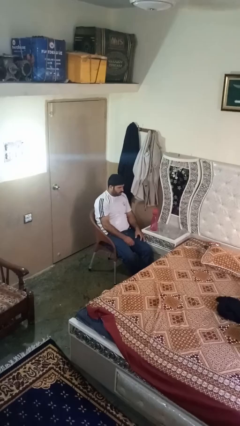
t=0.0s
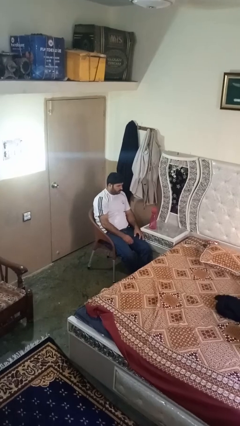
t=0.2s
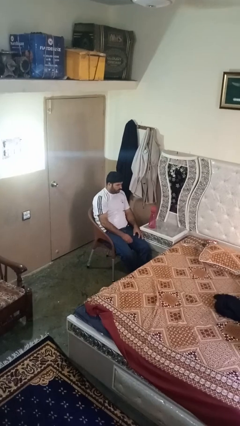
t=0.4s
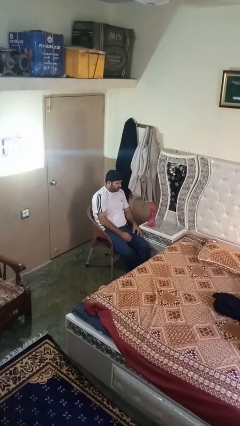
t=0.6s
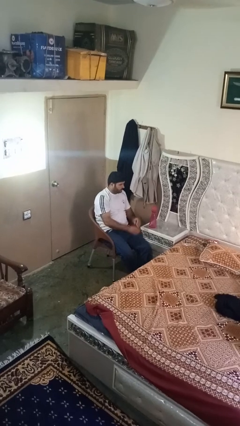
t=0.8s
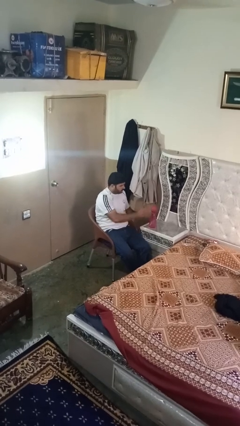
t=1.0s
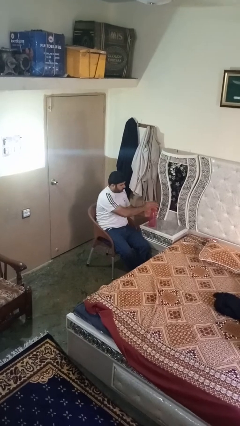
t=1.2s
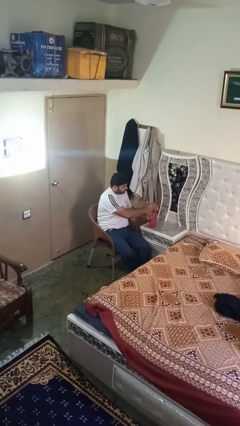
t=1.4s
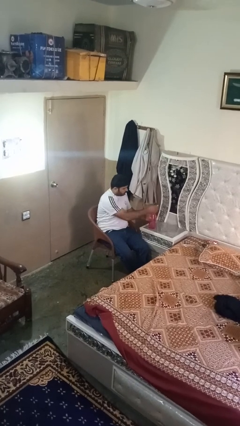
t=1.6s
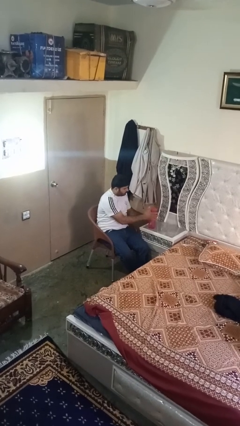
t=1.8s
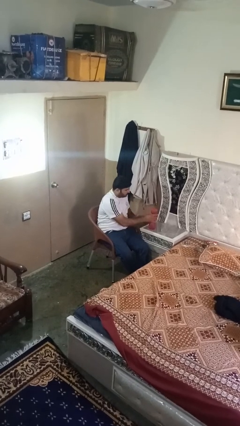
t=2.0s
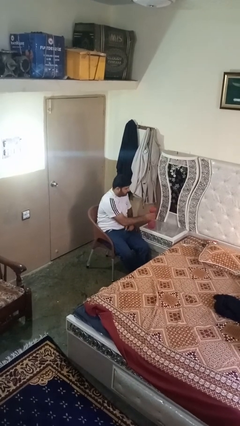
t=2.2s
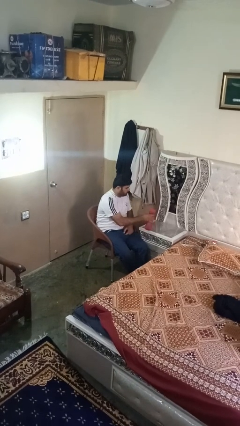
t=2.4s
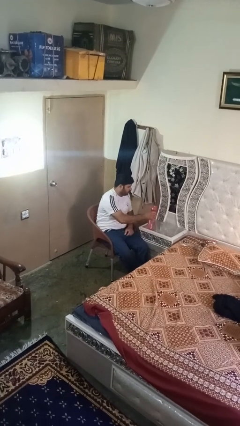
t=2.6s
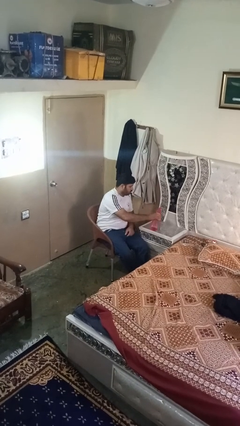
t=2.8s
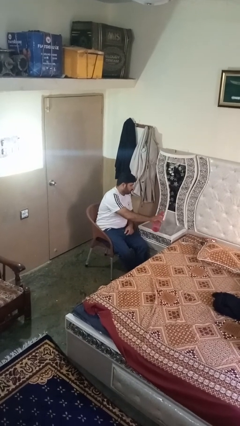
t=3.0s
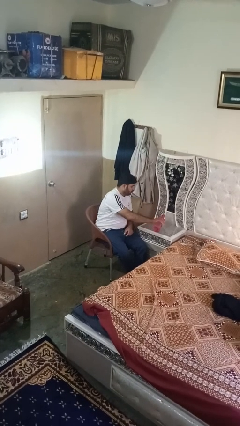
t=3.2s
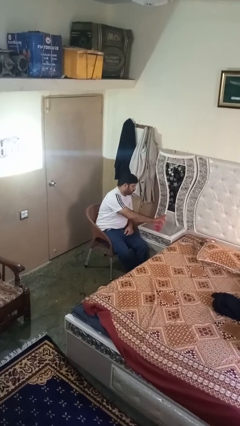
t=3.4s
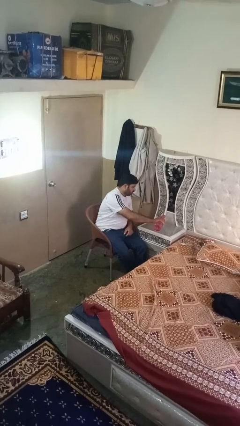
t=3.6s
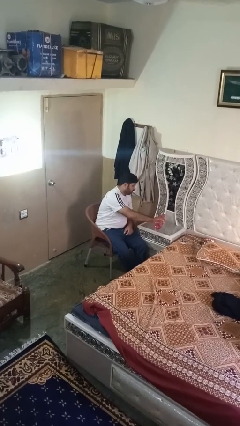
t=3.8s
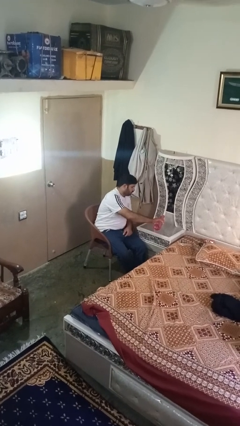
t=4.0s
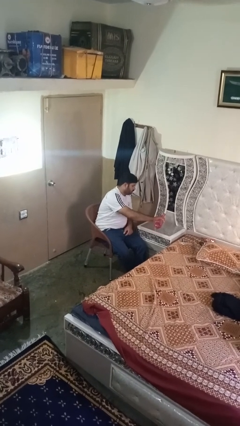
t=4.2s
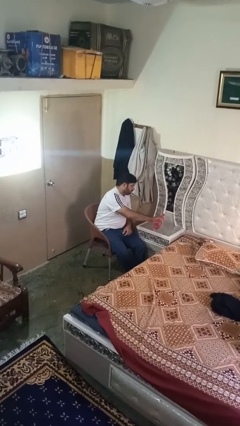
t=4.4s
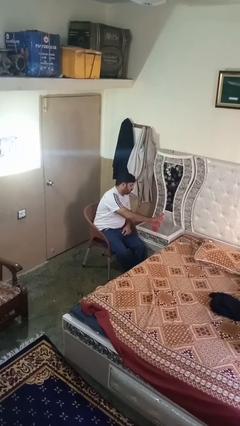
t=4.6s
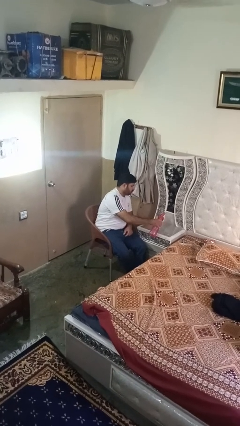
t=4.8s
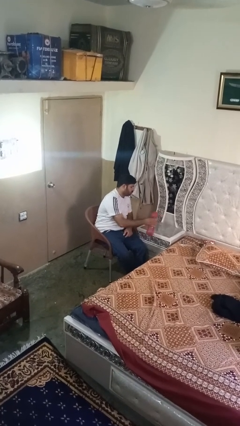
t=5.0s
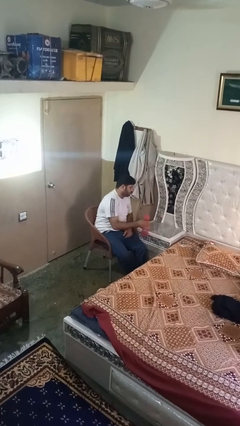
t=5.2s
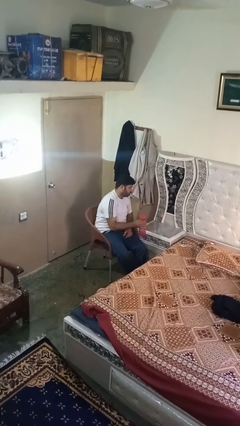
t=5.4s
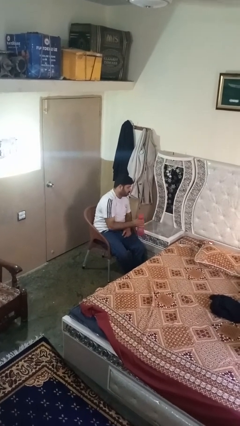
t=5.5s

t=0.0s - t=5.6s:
person pours liquid into cup

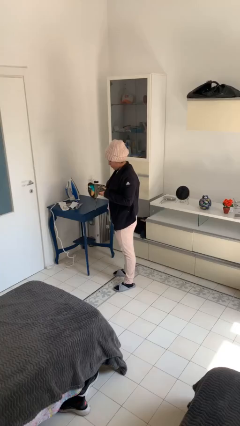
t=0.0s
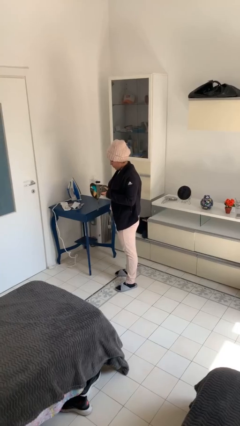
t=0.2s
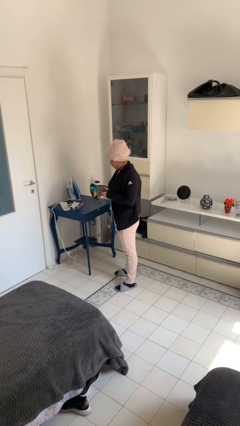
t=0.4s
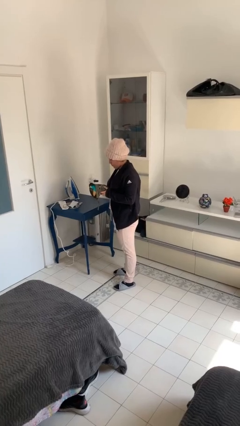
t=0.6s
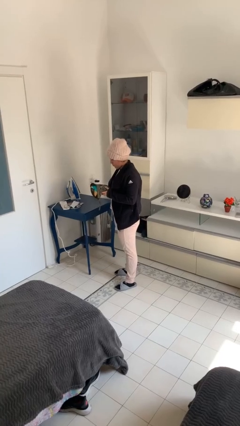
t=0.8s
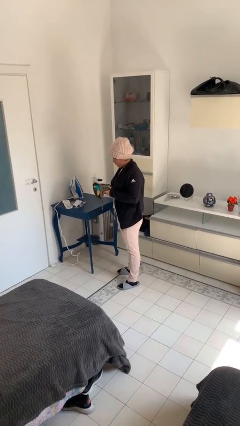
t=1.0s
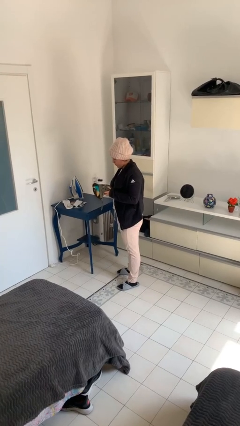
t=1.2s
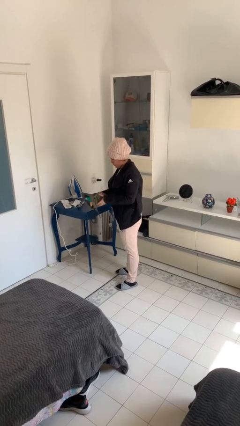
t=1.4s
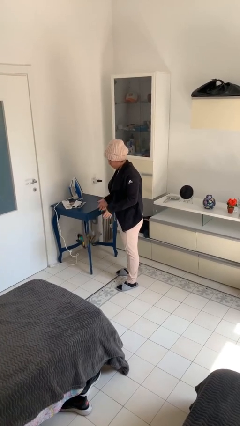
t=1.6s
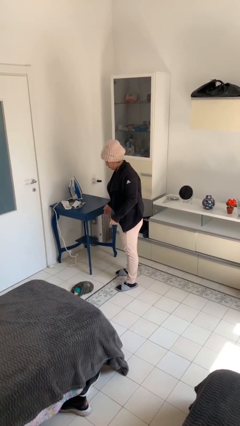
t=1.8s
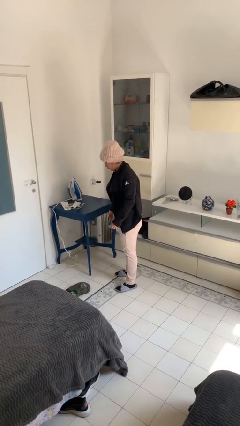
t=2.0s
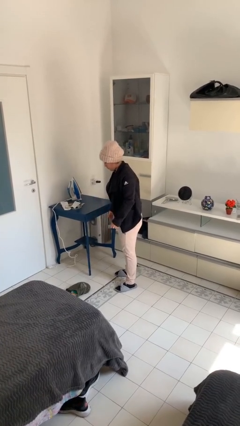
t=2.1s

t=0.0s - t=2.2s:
person drops object

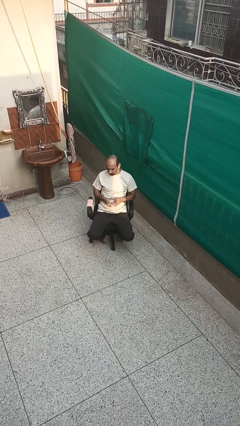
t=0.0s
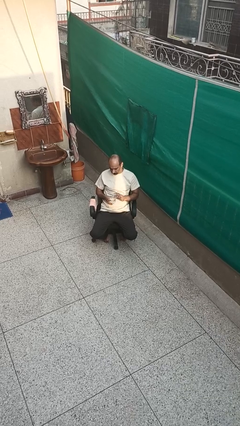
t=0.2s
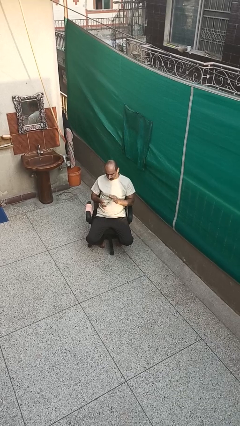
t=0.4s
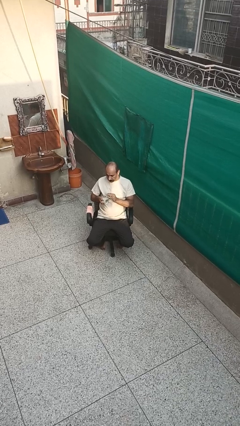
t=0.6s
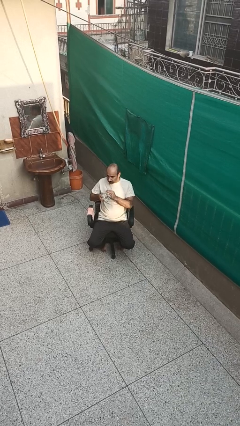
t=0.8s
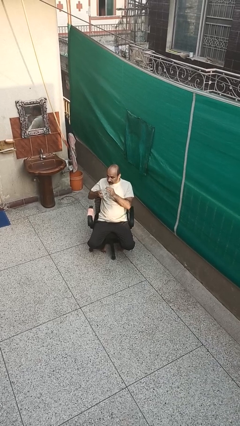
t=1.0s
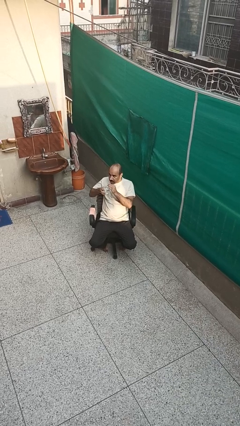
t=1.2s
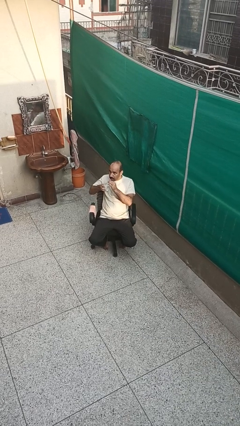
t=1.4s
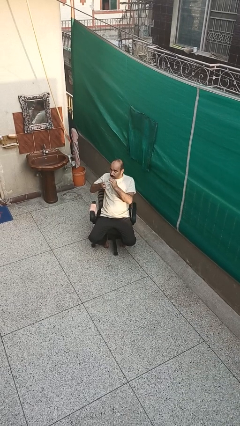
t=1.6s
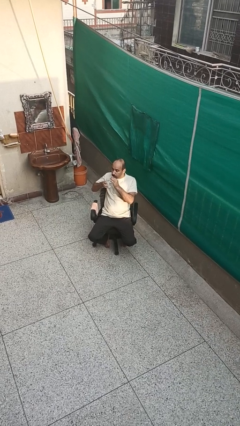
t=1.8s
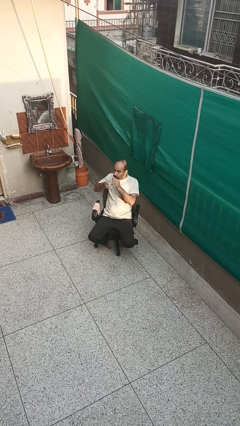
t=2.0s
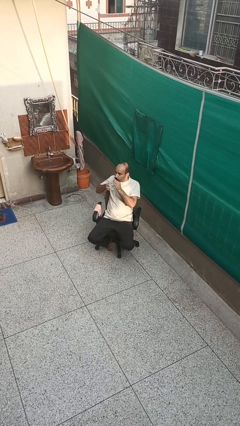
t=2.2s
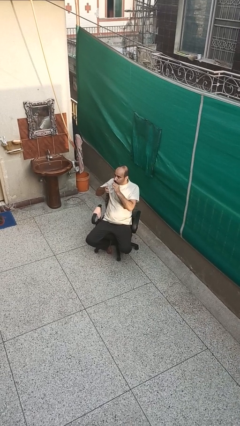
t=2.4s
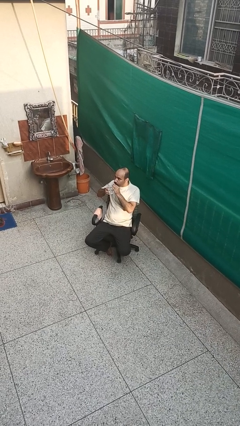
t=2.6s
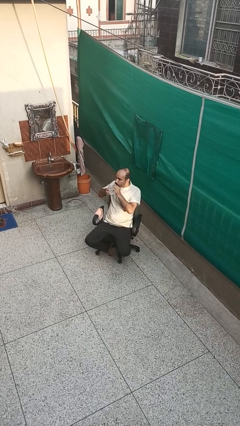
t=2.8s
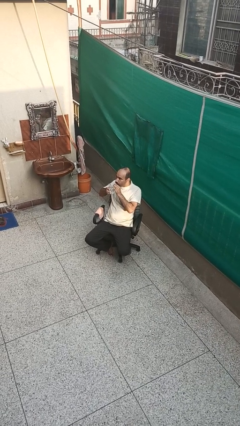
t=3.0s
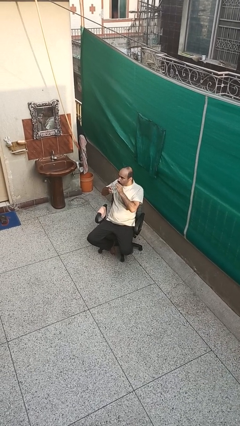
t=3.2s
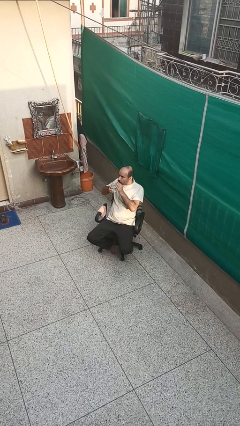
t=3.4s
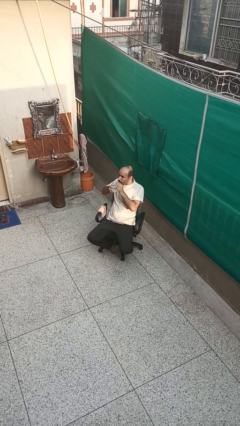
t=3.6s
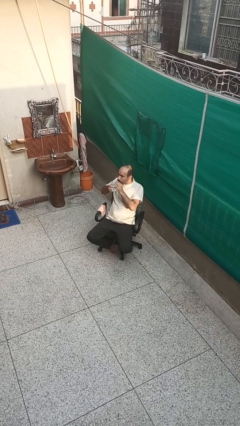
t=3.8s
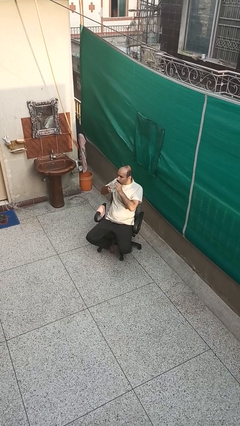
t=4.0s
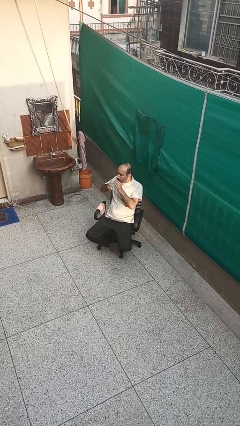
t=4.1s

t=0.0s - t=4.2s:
person drinks from straw

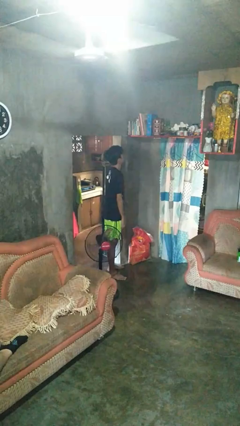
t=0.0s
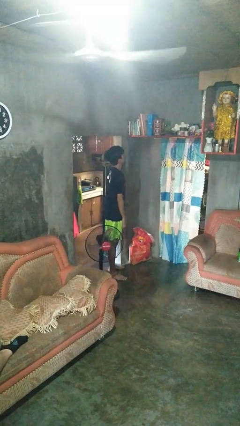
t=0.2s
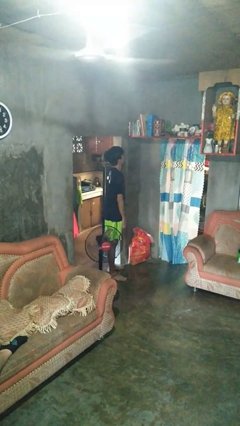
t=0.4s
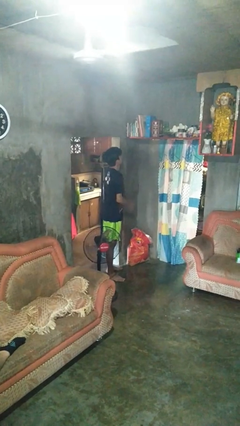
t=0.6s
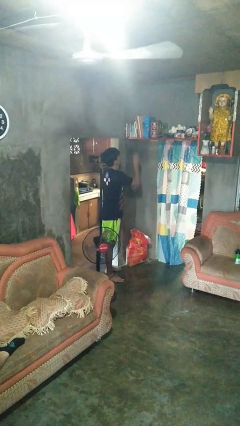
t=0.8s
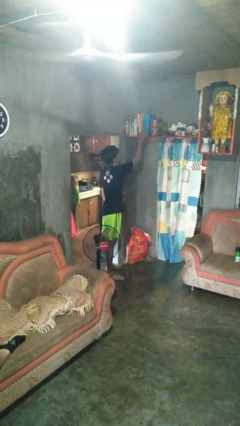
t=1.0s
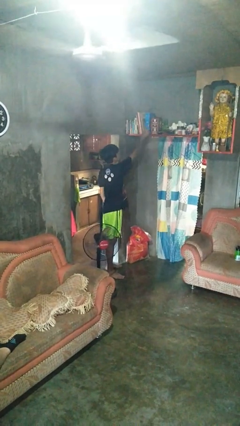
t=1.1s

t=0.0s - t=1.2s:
person picks up object from shelf

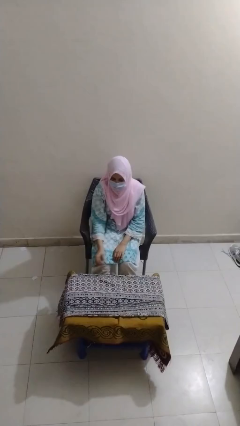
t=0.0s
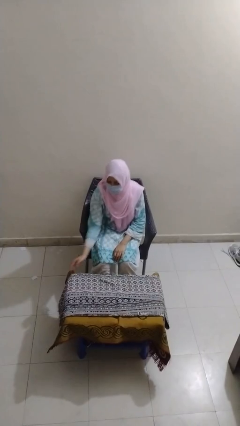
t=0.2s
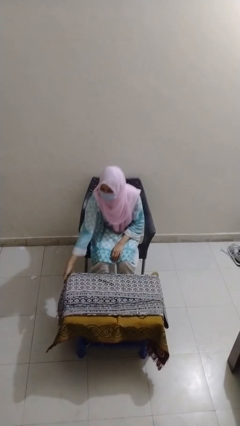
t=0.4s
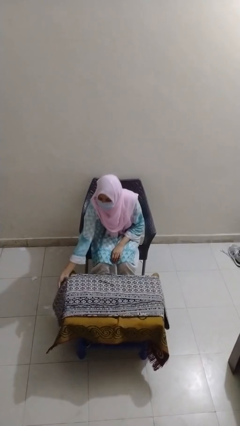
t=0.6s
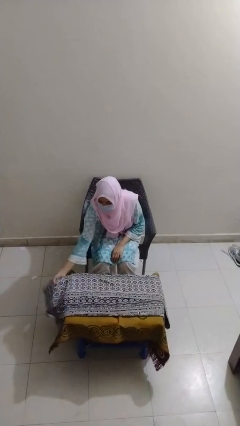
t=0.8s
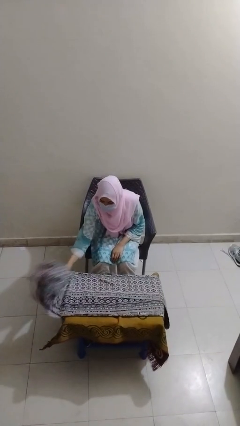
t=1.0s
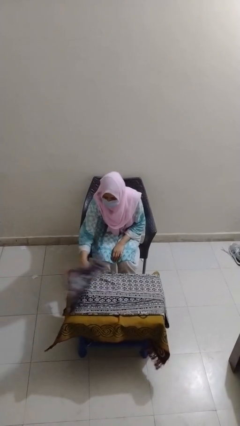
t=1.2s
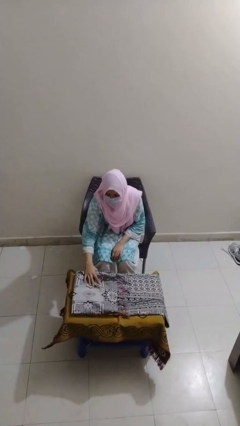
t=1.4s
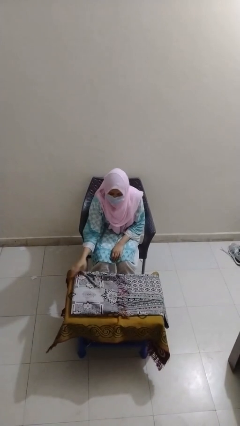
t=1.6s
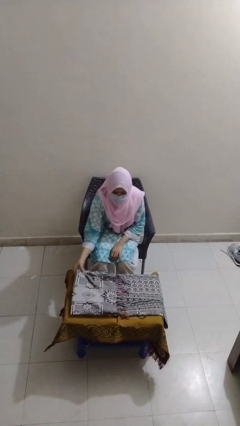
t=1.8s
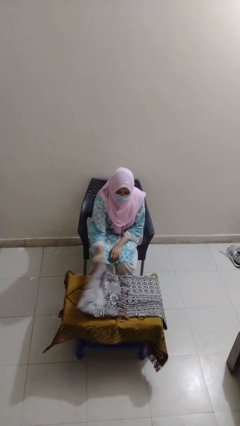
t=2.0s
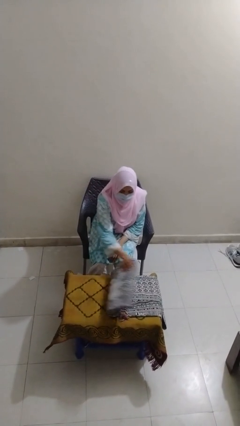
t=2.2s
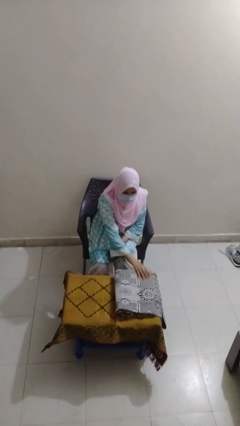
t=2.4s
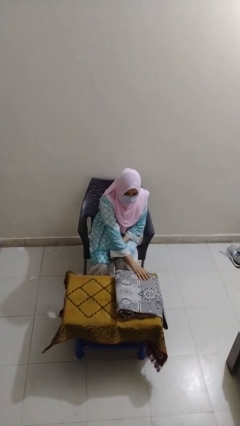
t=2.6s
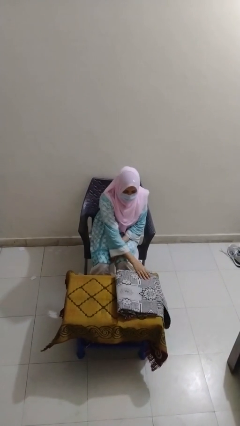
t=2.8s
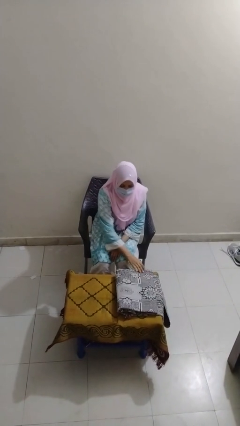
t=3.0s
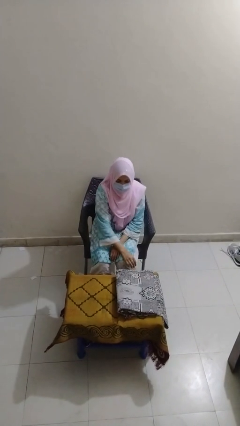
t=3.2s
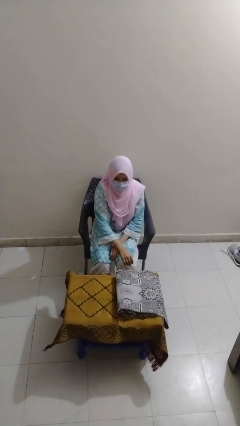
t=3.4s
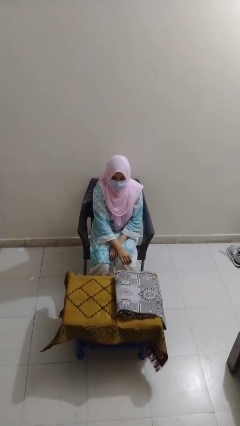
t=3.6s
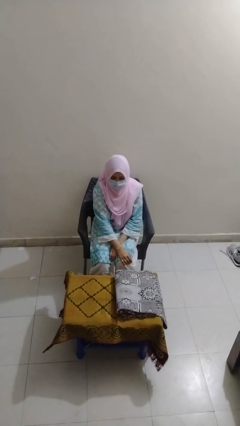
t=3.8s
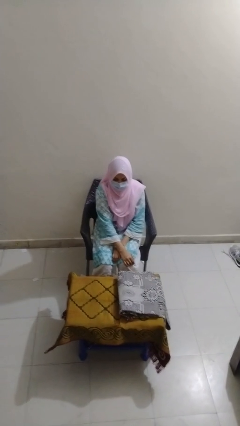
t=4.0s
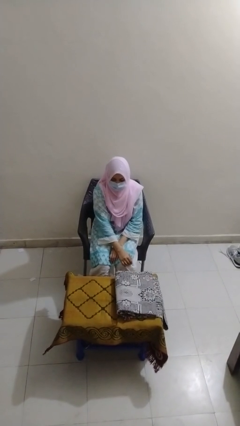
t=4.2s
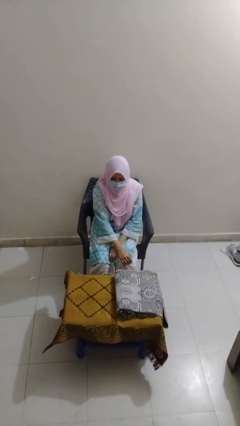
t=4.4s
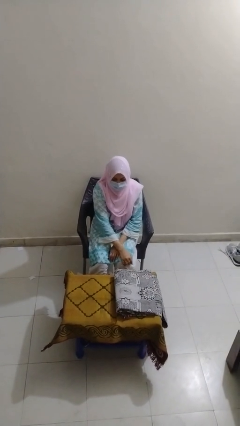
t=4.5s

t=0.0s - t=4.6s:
person folds blanket
